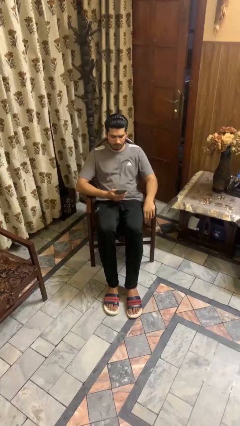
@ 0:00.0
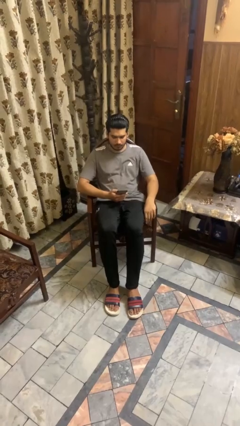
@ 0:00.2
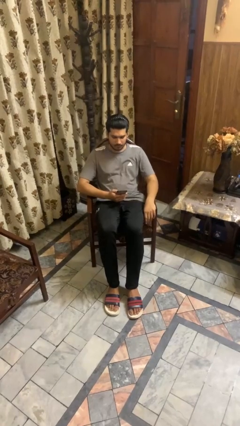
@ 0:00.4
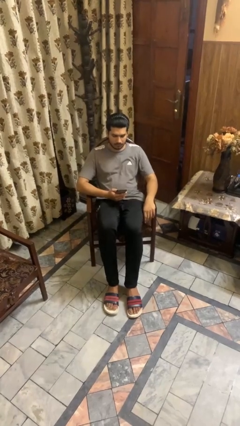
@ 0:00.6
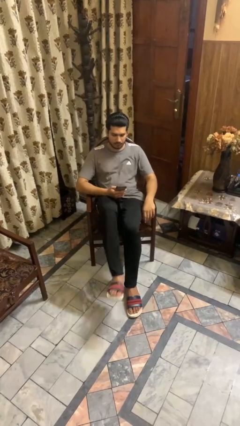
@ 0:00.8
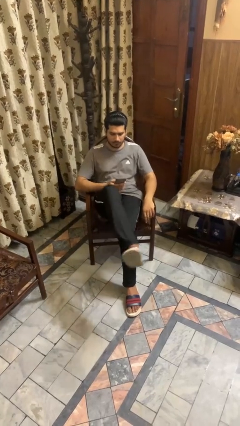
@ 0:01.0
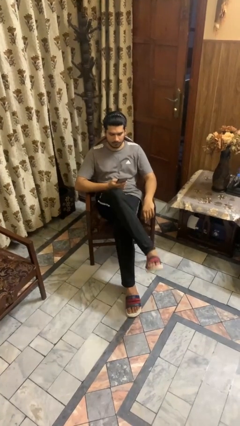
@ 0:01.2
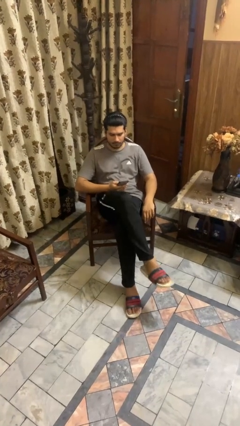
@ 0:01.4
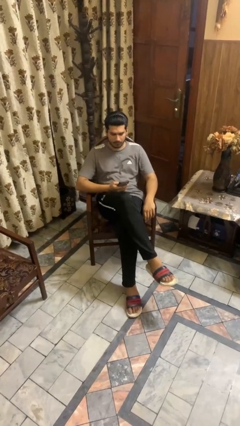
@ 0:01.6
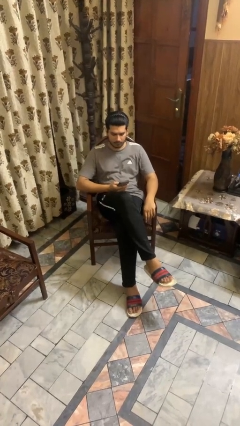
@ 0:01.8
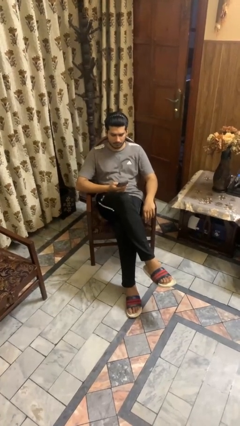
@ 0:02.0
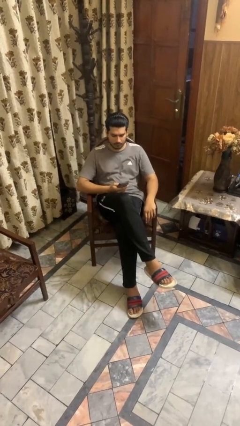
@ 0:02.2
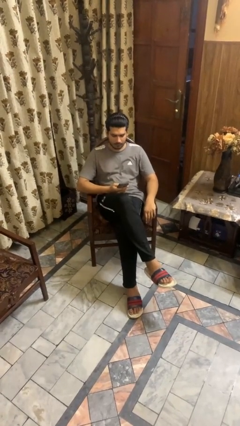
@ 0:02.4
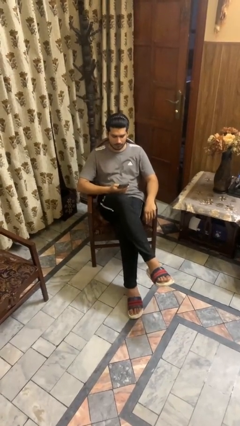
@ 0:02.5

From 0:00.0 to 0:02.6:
person crosses legs

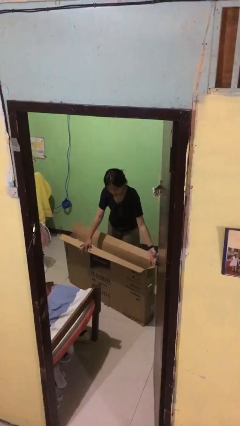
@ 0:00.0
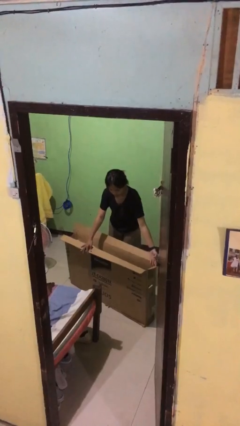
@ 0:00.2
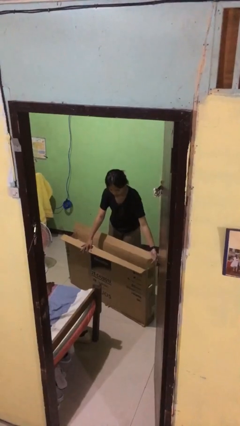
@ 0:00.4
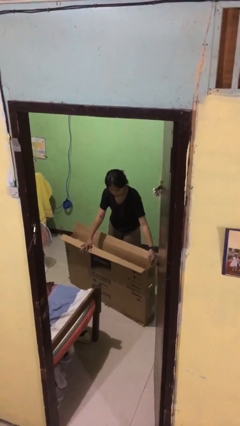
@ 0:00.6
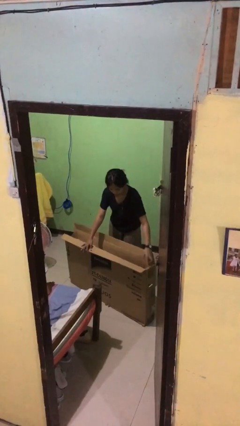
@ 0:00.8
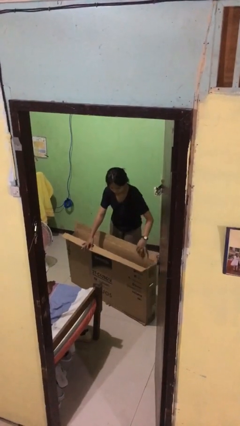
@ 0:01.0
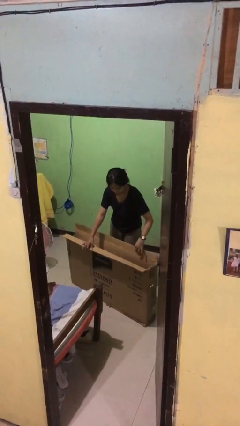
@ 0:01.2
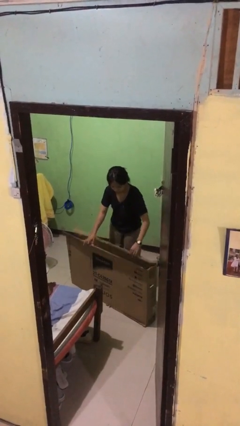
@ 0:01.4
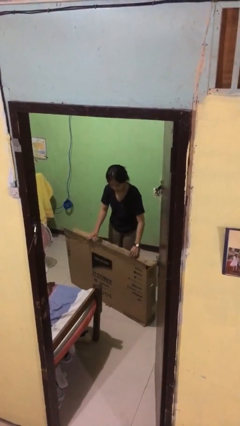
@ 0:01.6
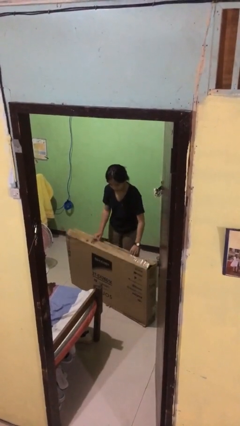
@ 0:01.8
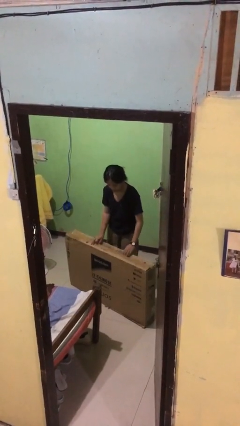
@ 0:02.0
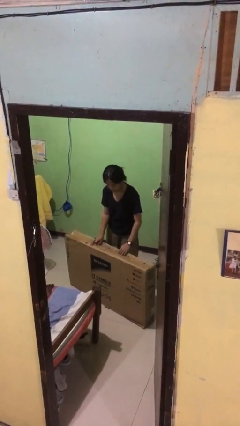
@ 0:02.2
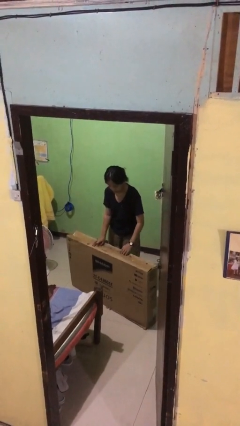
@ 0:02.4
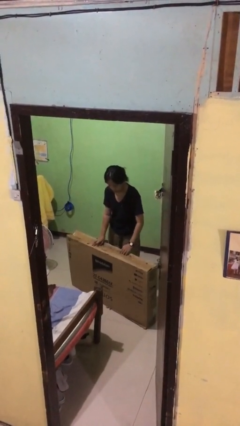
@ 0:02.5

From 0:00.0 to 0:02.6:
person closes box

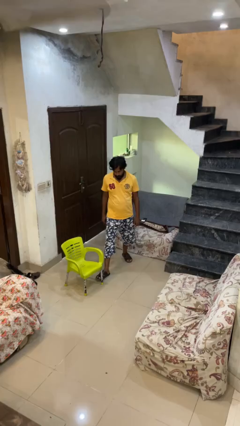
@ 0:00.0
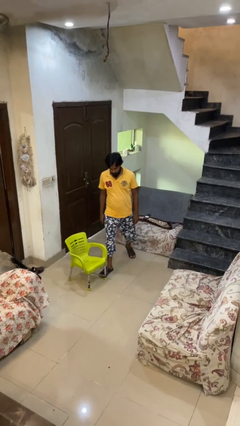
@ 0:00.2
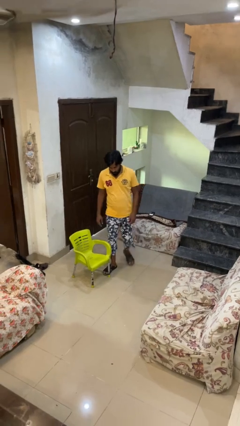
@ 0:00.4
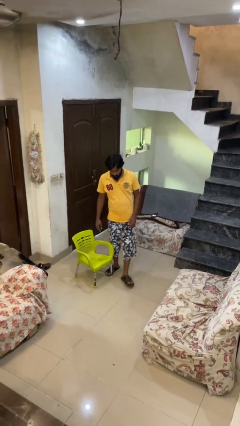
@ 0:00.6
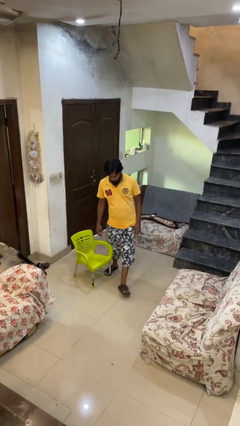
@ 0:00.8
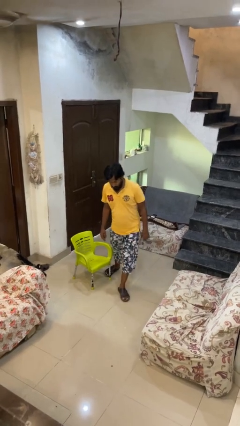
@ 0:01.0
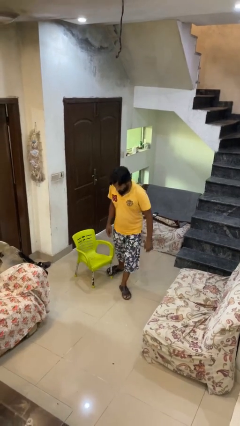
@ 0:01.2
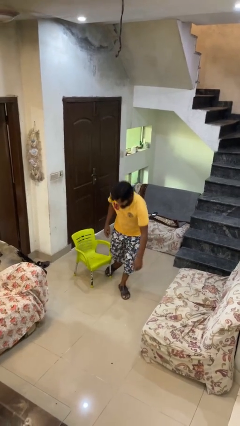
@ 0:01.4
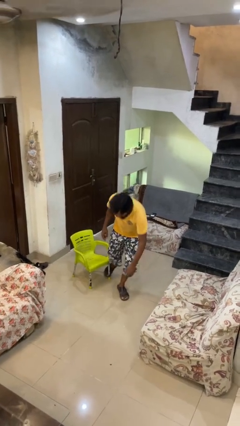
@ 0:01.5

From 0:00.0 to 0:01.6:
person trips on object on floor

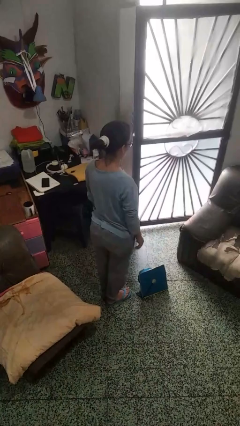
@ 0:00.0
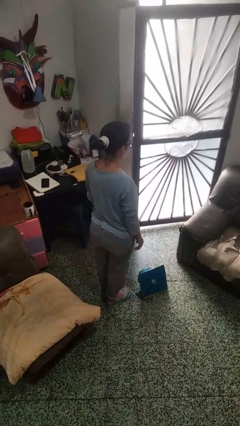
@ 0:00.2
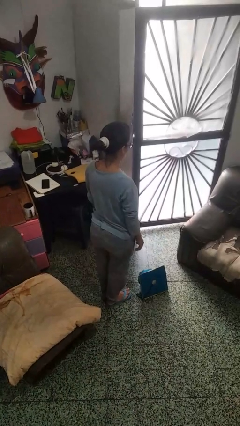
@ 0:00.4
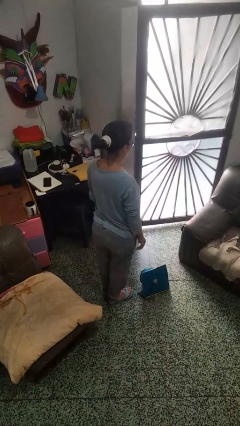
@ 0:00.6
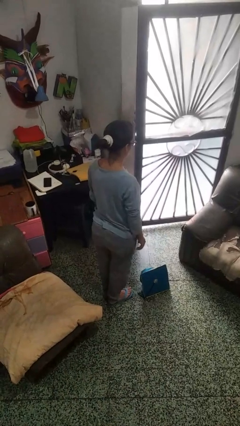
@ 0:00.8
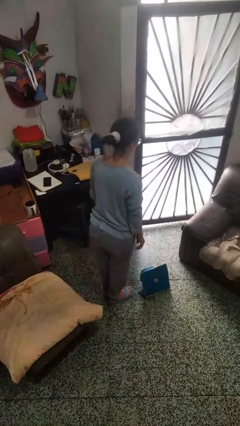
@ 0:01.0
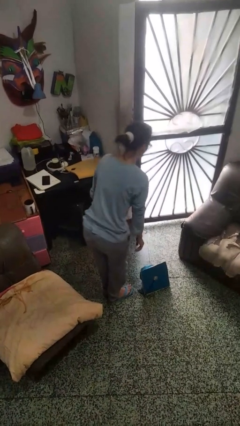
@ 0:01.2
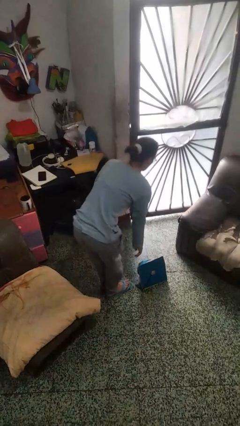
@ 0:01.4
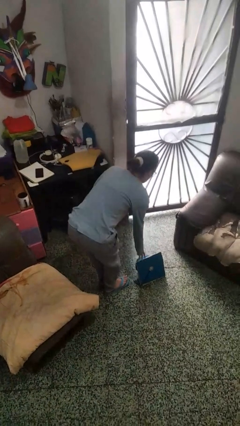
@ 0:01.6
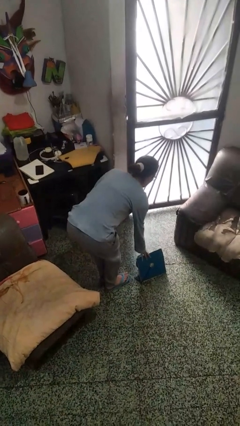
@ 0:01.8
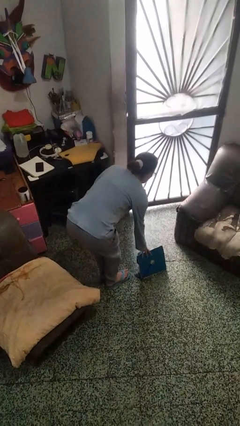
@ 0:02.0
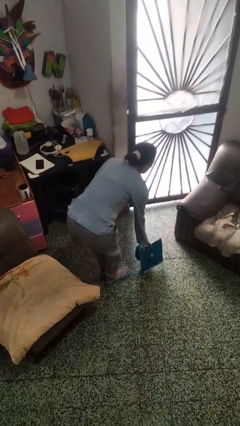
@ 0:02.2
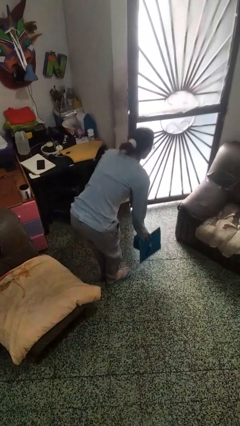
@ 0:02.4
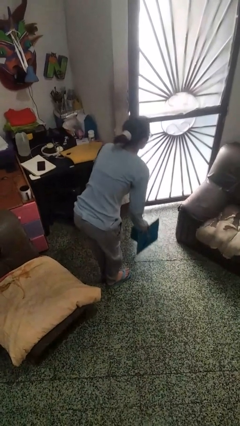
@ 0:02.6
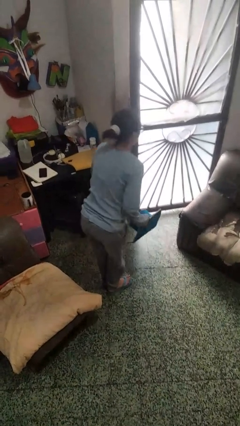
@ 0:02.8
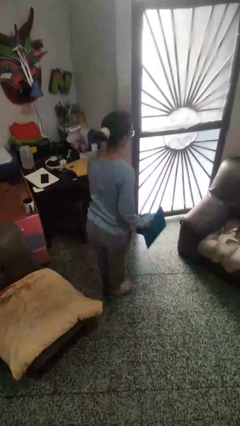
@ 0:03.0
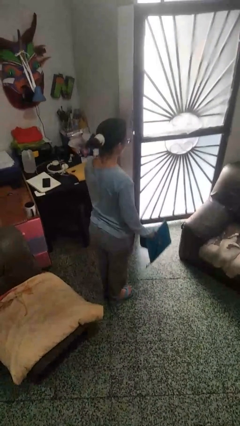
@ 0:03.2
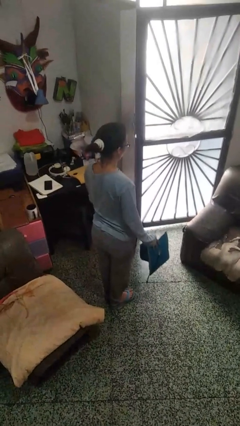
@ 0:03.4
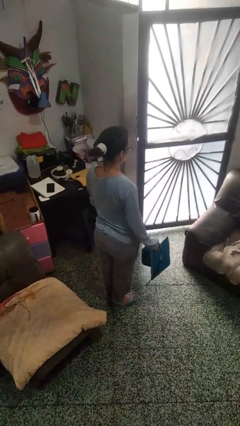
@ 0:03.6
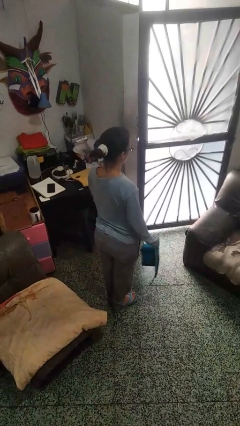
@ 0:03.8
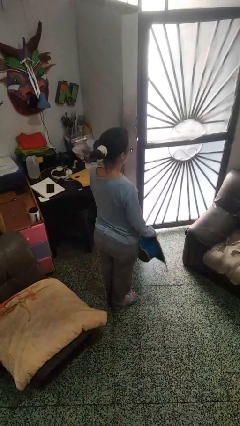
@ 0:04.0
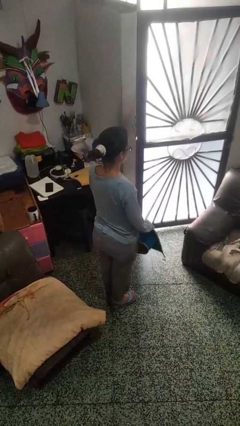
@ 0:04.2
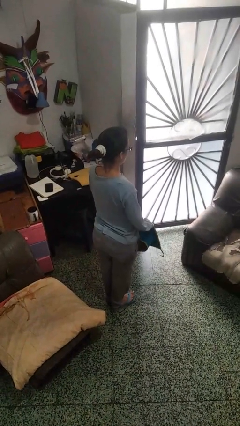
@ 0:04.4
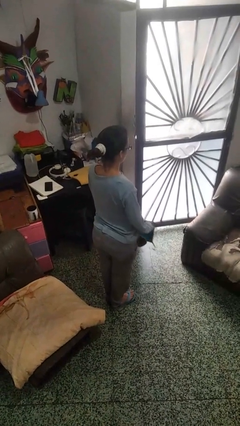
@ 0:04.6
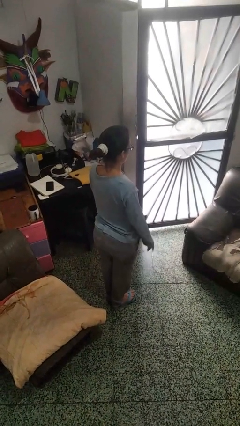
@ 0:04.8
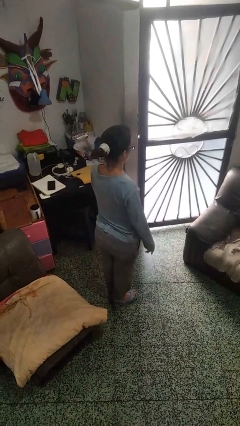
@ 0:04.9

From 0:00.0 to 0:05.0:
person picks up object from floor

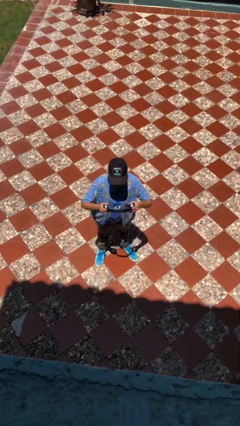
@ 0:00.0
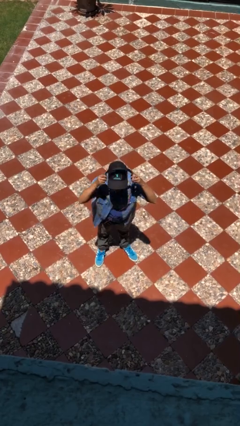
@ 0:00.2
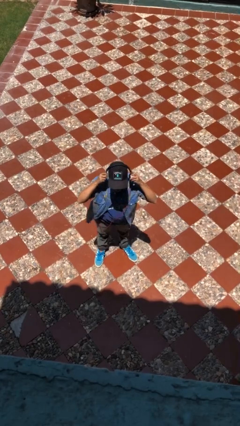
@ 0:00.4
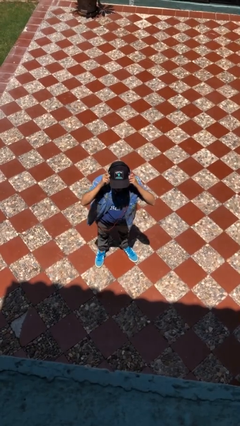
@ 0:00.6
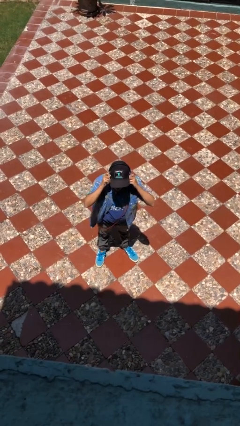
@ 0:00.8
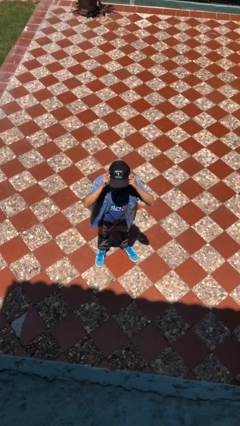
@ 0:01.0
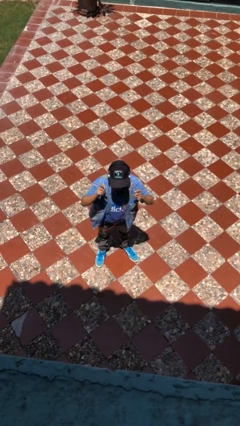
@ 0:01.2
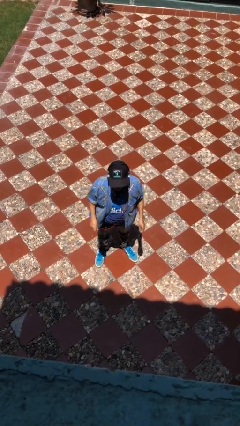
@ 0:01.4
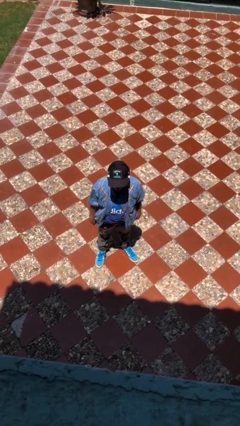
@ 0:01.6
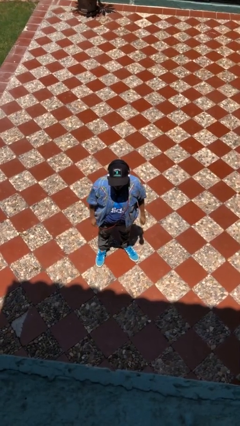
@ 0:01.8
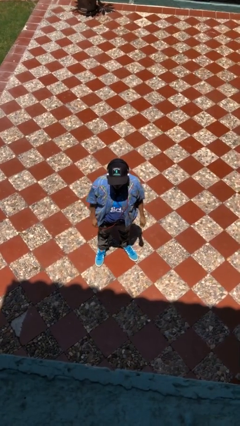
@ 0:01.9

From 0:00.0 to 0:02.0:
person puts on headphones

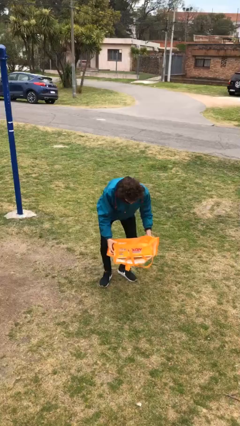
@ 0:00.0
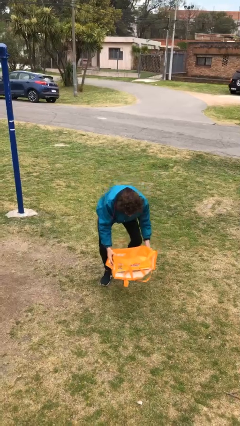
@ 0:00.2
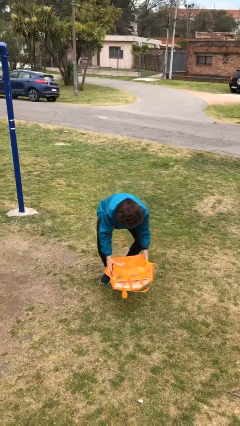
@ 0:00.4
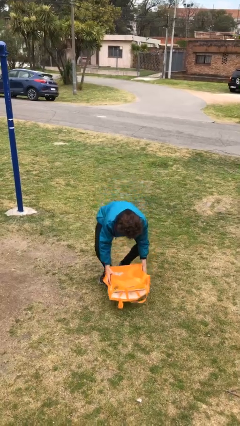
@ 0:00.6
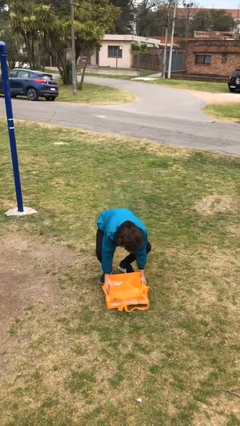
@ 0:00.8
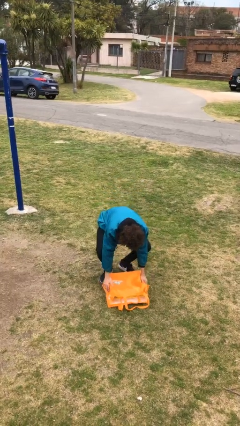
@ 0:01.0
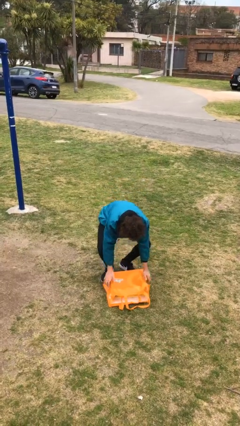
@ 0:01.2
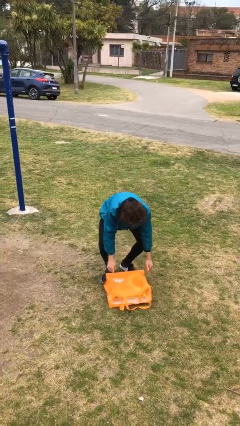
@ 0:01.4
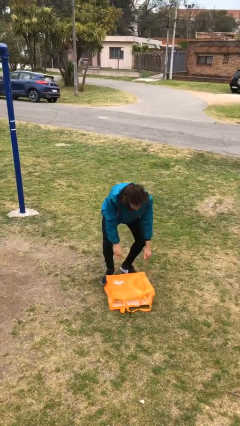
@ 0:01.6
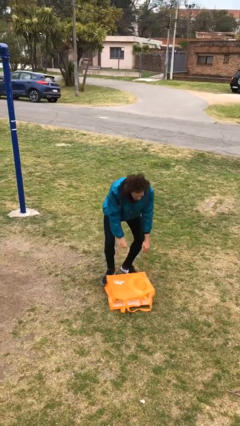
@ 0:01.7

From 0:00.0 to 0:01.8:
person puts down object on floor

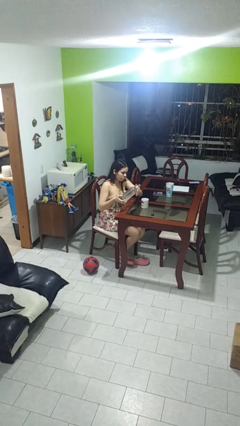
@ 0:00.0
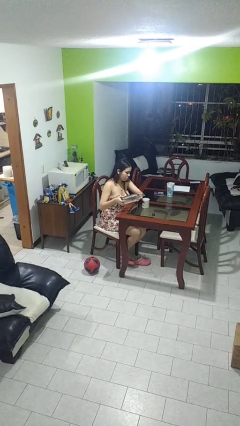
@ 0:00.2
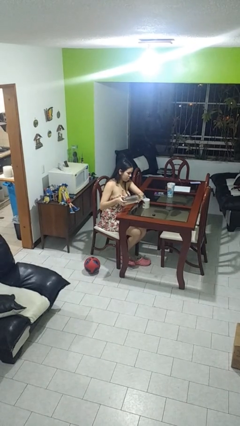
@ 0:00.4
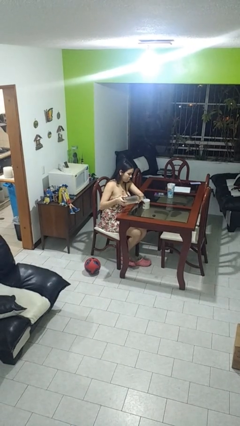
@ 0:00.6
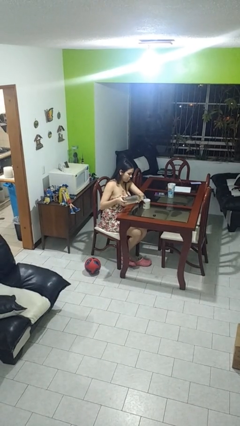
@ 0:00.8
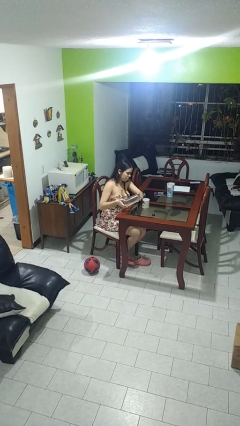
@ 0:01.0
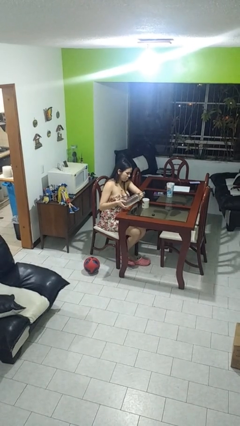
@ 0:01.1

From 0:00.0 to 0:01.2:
person pours liquid into cup

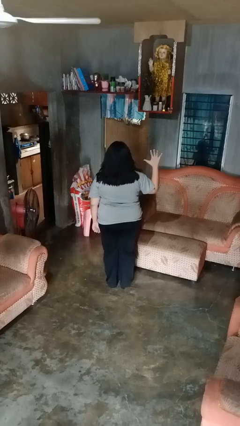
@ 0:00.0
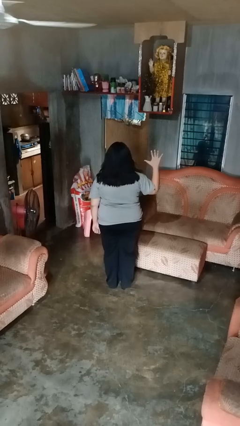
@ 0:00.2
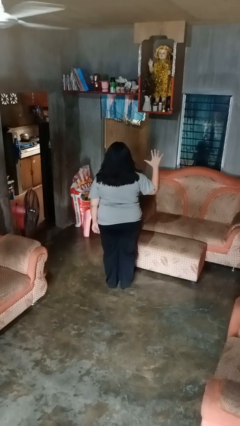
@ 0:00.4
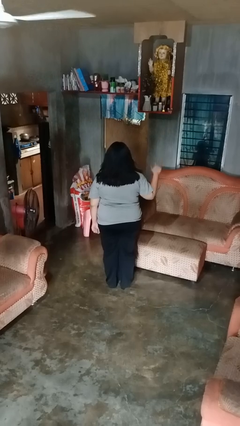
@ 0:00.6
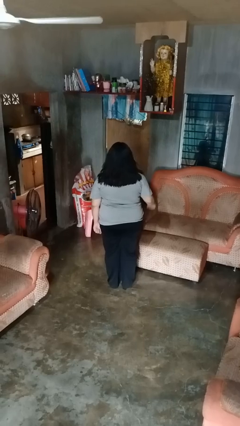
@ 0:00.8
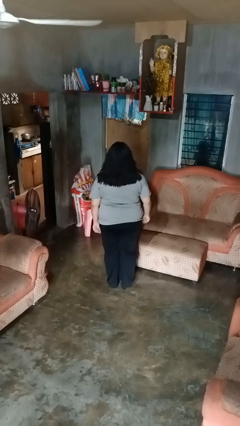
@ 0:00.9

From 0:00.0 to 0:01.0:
person gestures number five
